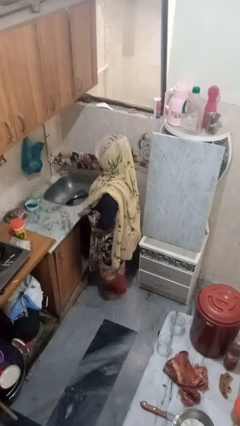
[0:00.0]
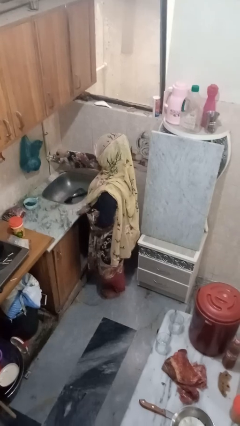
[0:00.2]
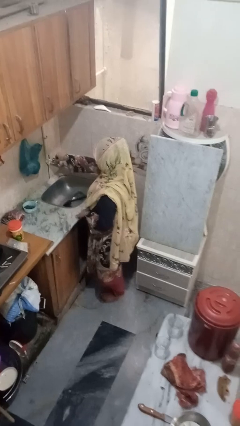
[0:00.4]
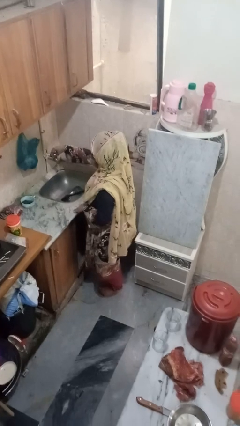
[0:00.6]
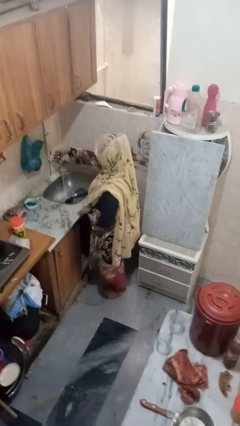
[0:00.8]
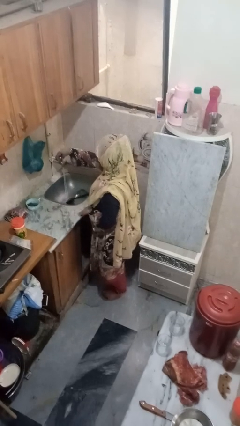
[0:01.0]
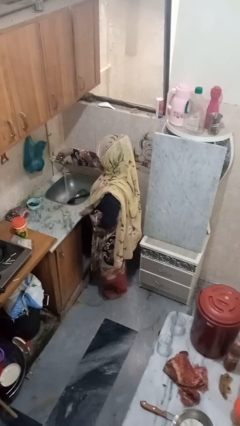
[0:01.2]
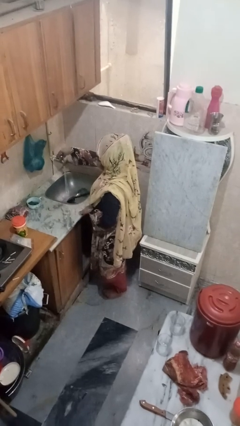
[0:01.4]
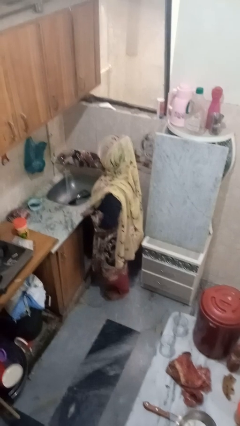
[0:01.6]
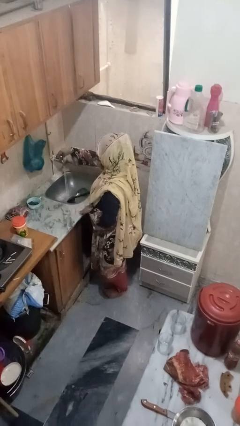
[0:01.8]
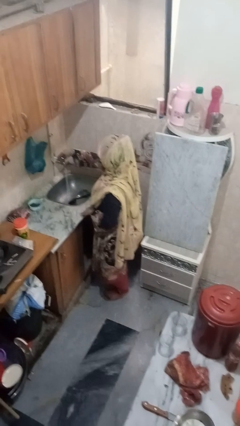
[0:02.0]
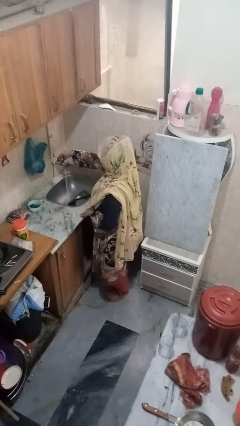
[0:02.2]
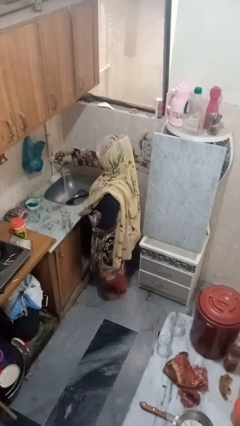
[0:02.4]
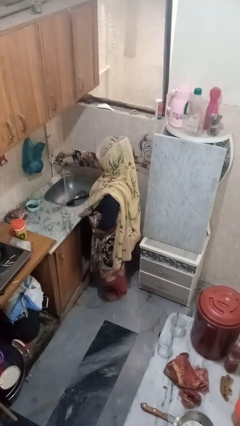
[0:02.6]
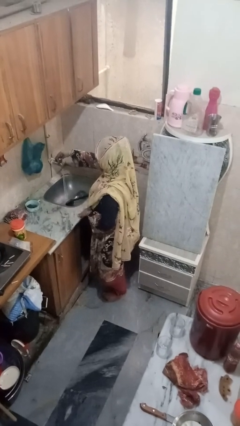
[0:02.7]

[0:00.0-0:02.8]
person turns on faucet

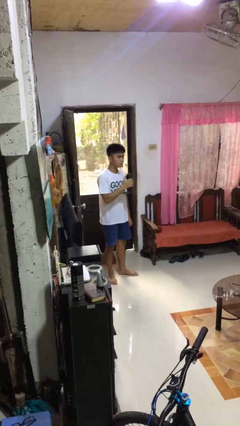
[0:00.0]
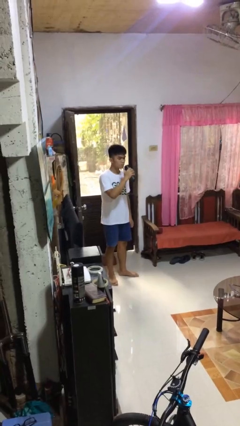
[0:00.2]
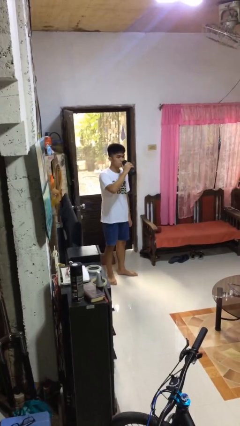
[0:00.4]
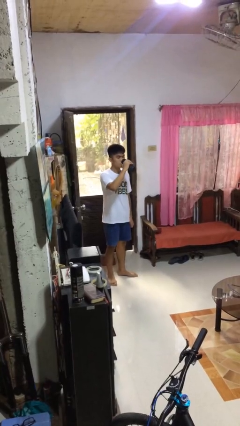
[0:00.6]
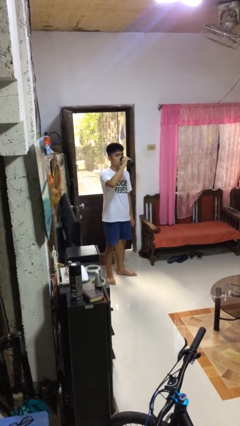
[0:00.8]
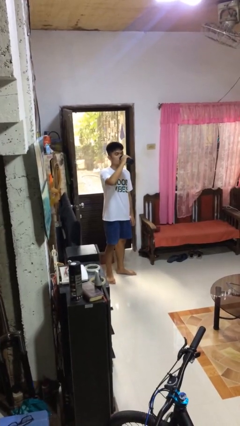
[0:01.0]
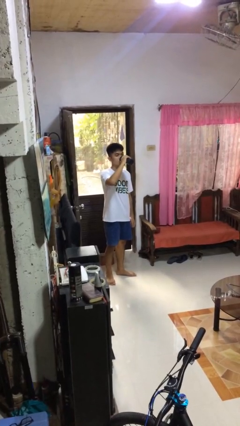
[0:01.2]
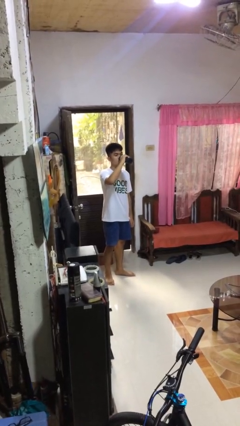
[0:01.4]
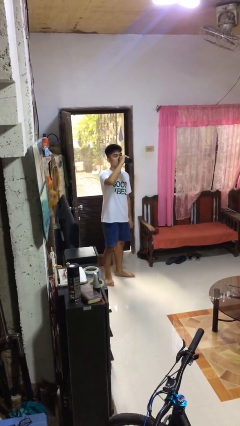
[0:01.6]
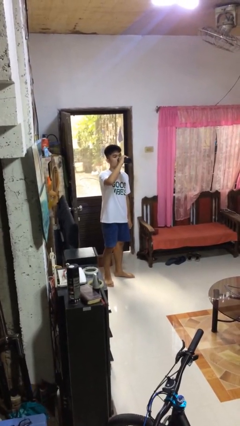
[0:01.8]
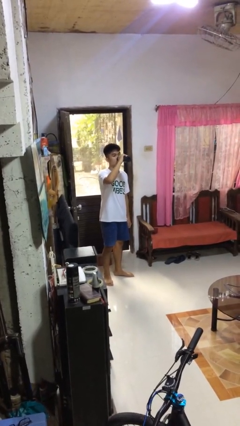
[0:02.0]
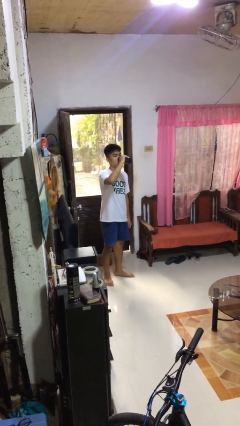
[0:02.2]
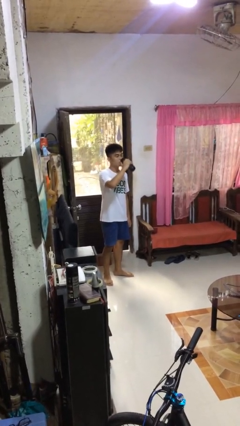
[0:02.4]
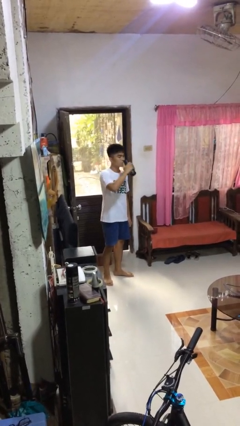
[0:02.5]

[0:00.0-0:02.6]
person drinks from bottle

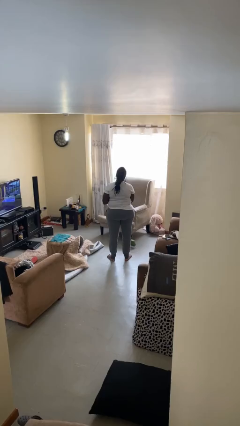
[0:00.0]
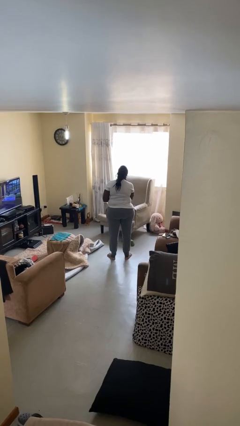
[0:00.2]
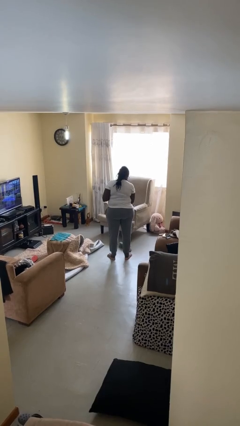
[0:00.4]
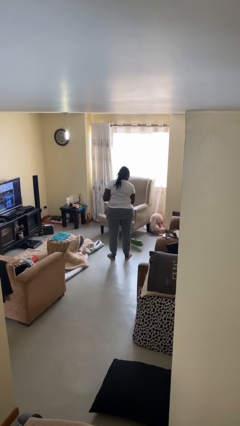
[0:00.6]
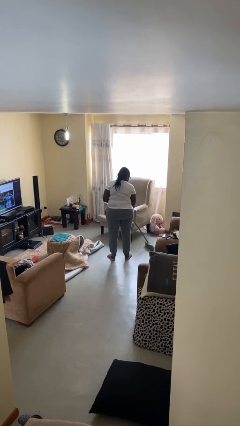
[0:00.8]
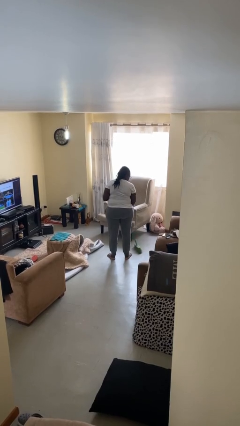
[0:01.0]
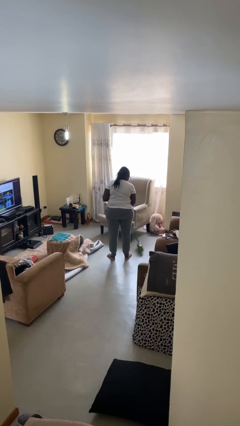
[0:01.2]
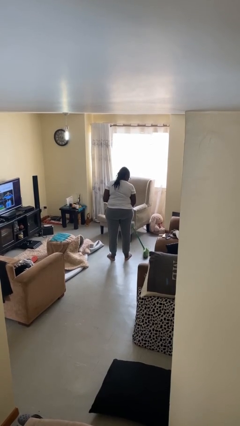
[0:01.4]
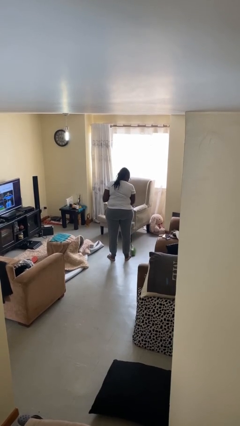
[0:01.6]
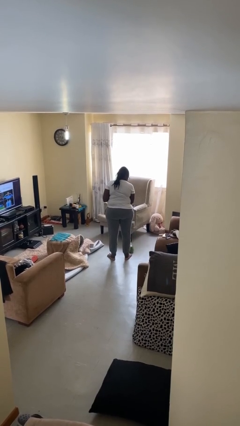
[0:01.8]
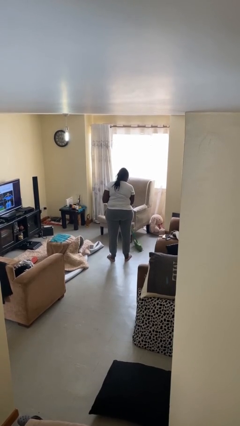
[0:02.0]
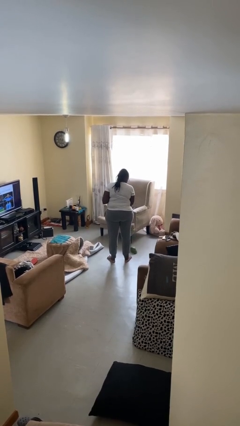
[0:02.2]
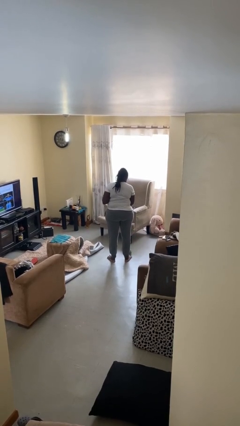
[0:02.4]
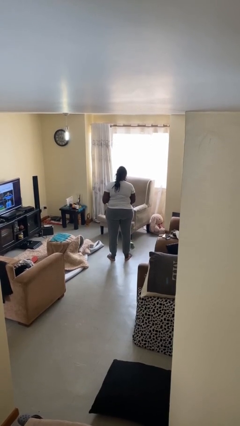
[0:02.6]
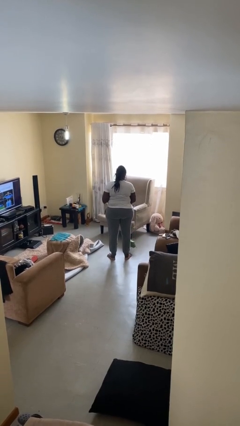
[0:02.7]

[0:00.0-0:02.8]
person sweeps floor

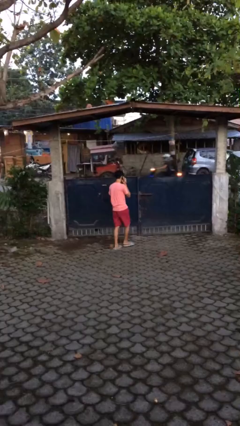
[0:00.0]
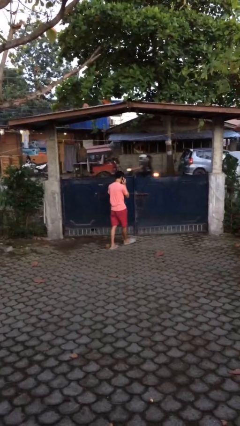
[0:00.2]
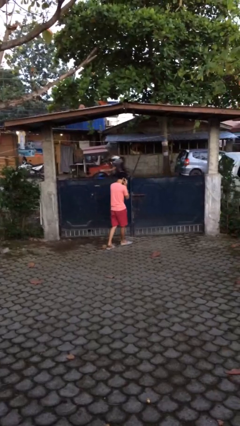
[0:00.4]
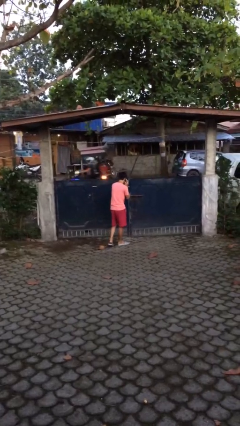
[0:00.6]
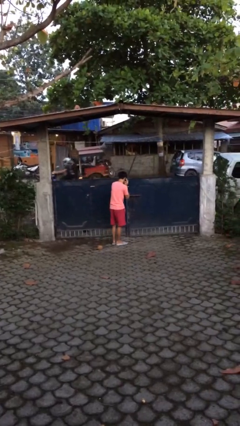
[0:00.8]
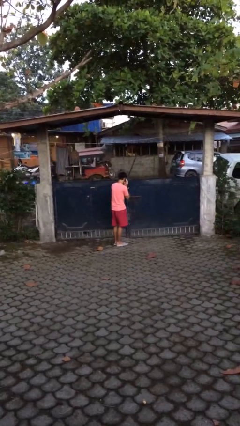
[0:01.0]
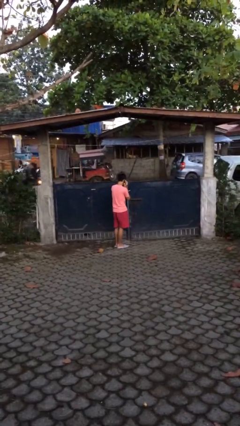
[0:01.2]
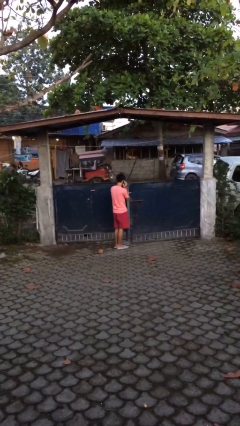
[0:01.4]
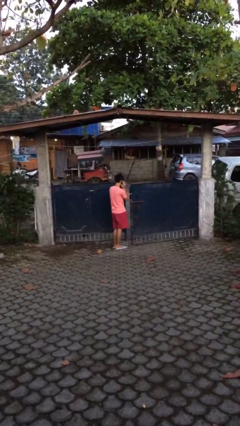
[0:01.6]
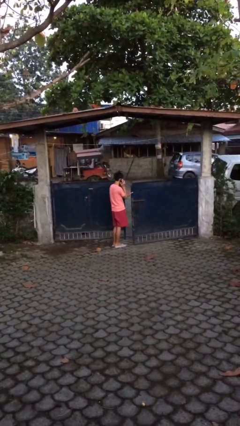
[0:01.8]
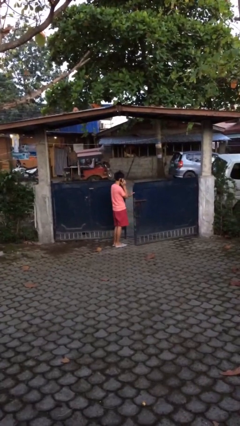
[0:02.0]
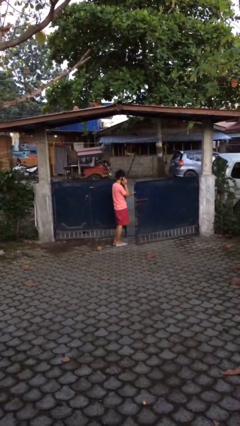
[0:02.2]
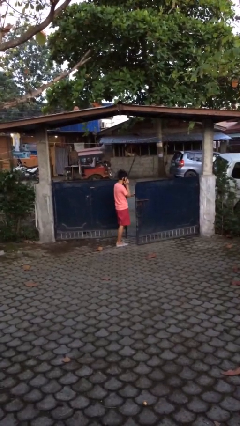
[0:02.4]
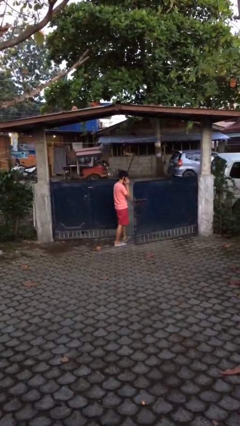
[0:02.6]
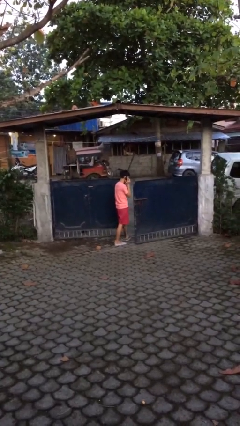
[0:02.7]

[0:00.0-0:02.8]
person opens facility door

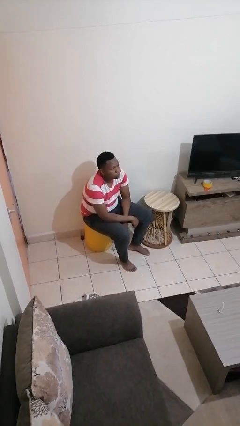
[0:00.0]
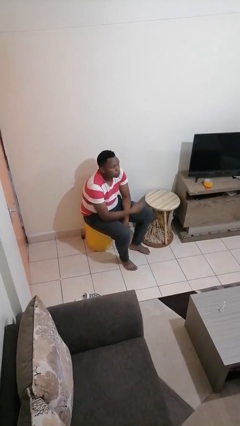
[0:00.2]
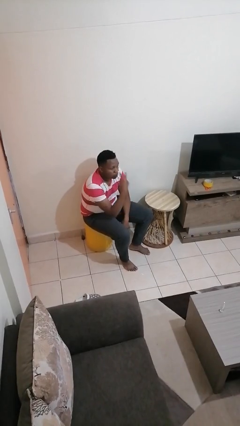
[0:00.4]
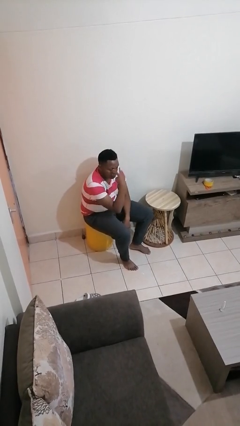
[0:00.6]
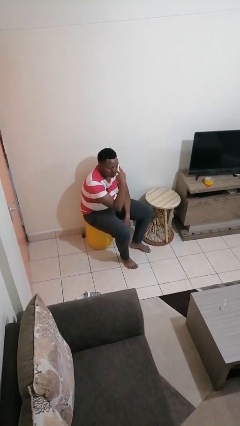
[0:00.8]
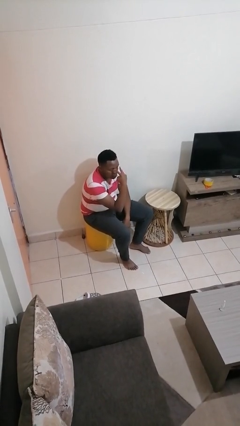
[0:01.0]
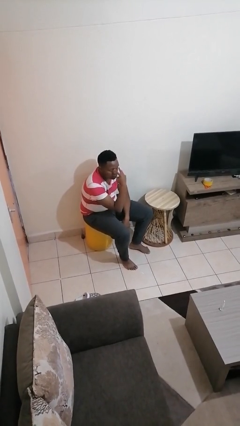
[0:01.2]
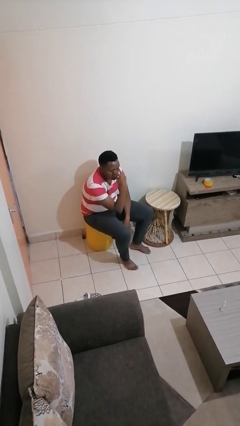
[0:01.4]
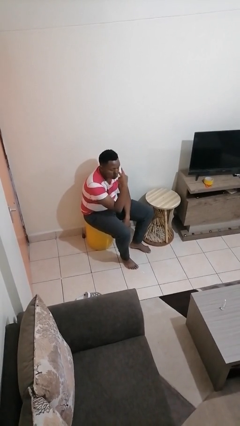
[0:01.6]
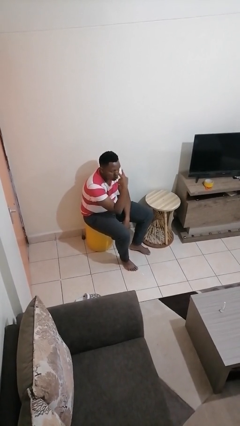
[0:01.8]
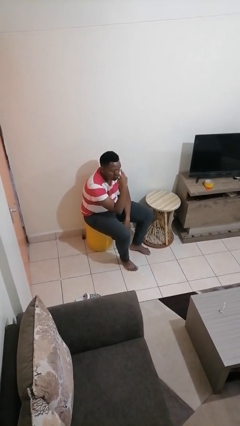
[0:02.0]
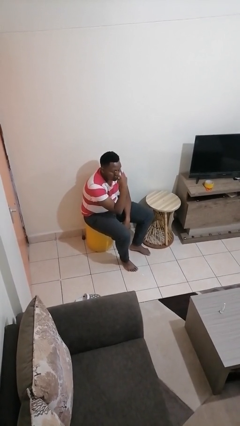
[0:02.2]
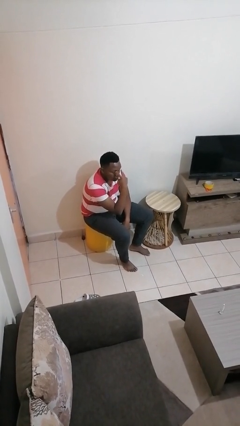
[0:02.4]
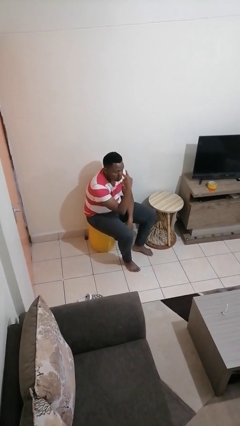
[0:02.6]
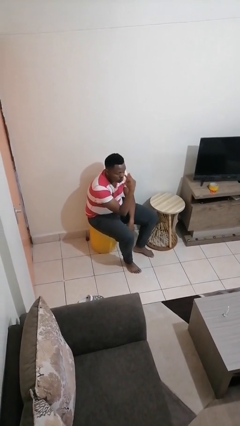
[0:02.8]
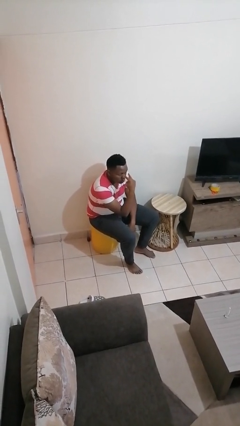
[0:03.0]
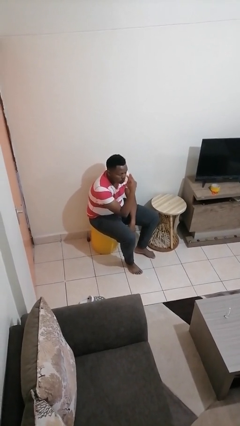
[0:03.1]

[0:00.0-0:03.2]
person gestures watch closely

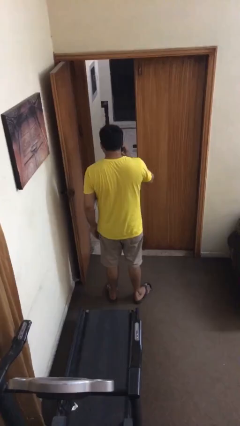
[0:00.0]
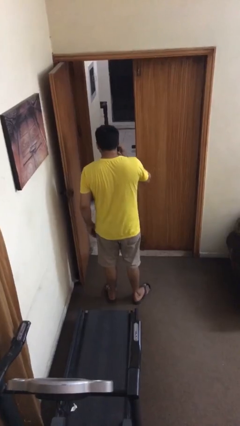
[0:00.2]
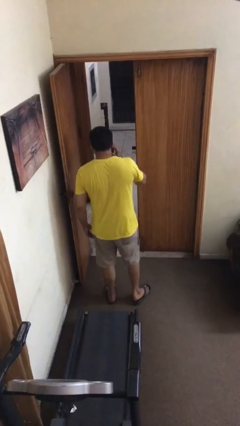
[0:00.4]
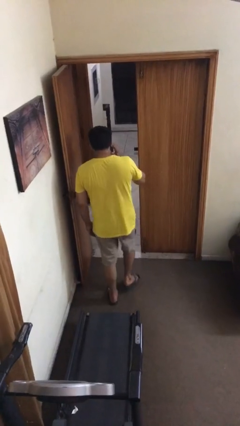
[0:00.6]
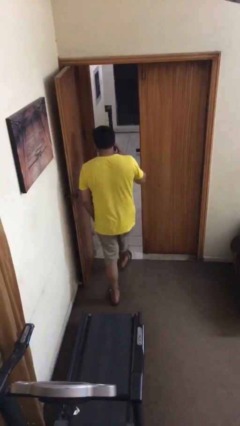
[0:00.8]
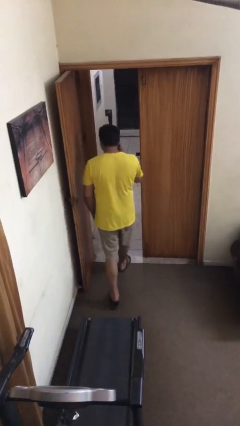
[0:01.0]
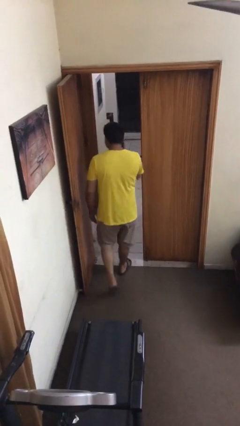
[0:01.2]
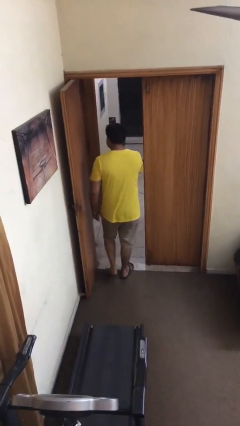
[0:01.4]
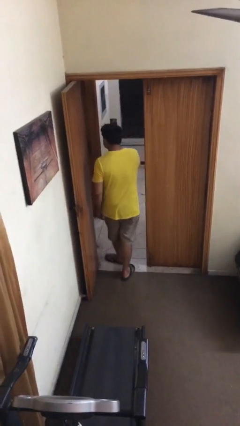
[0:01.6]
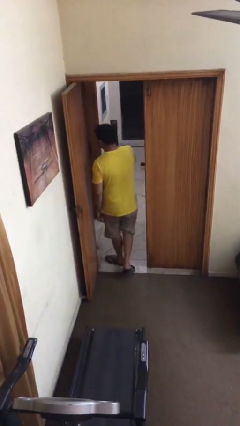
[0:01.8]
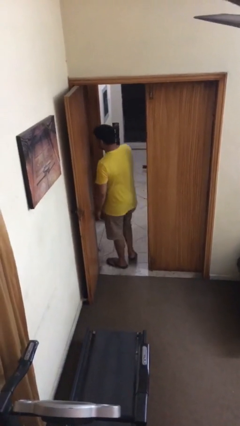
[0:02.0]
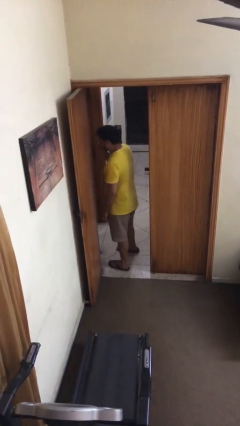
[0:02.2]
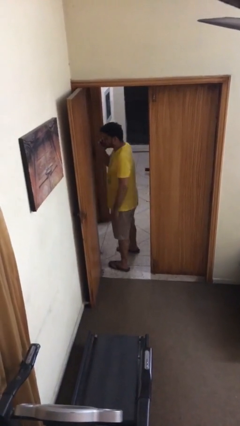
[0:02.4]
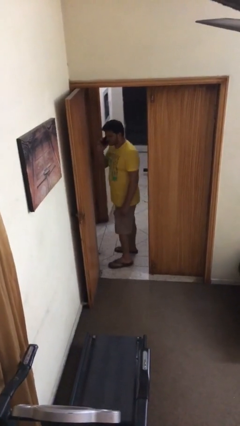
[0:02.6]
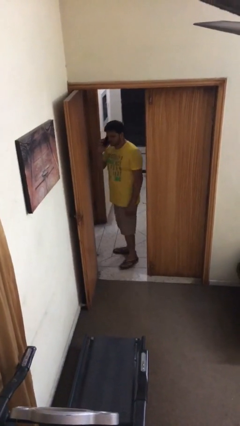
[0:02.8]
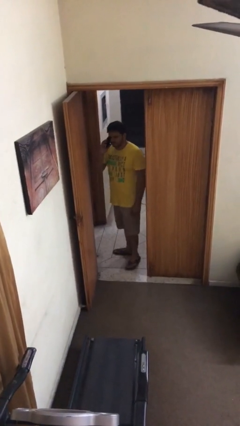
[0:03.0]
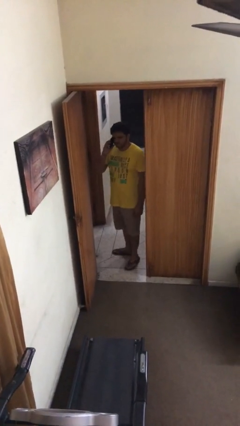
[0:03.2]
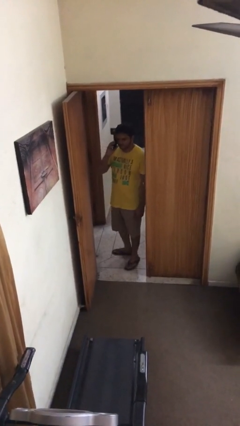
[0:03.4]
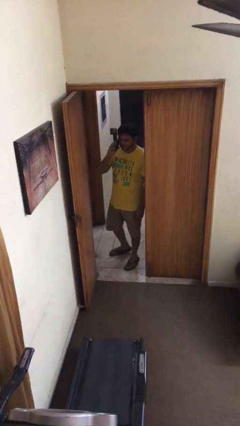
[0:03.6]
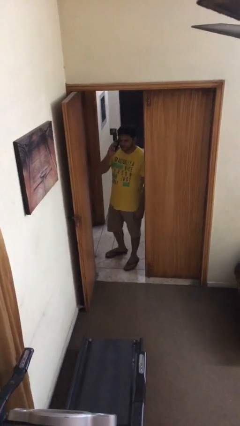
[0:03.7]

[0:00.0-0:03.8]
person exits scene through structure
